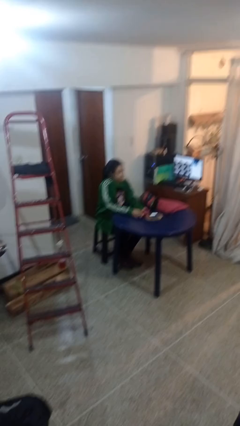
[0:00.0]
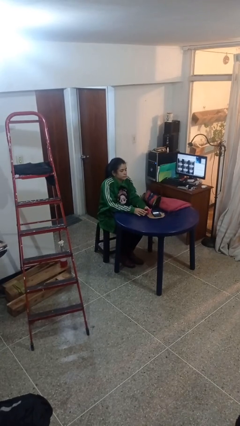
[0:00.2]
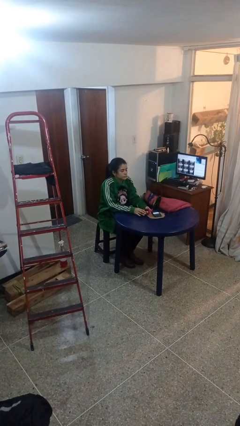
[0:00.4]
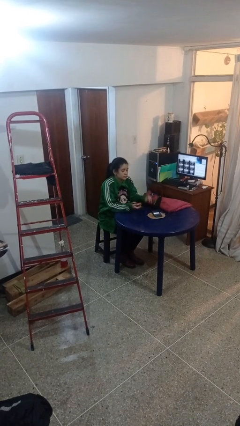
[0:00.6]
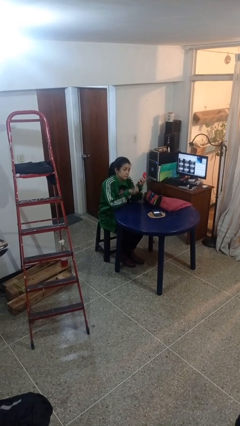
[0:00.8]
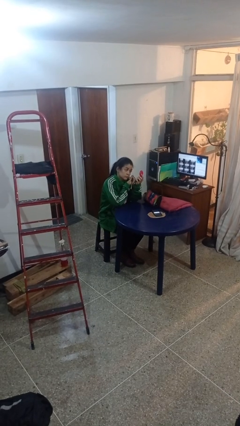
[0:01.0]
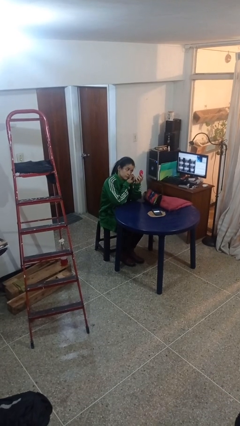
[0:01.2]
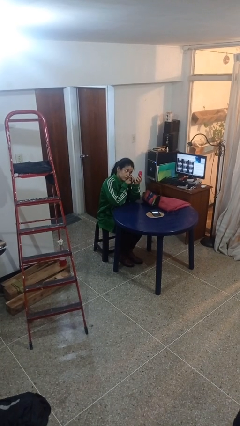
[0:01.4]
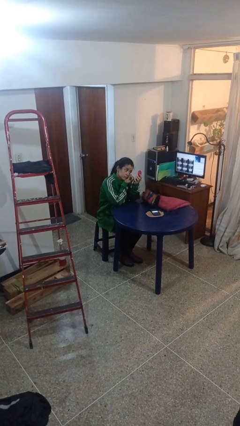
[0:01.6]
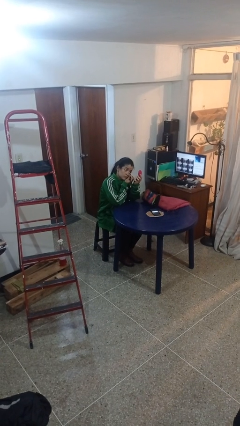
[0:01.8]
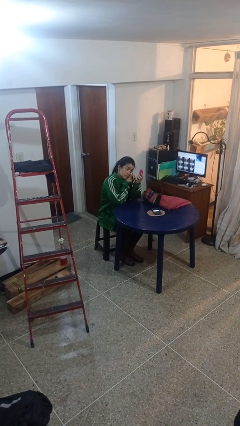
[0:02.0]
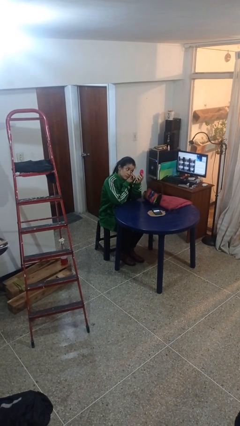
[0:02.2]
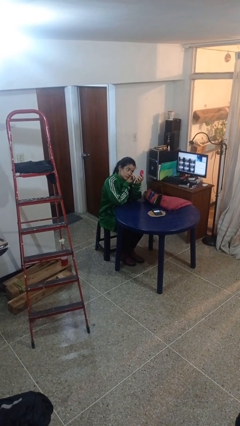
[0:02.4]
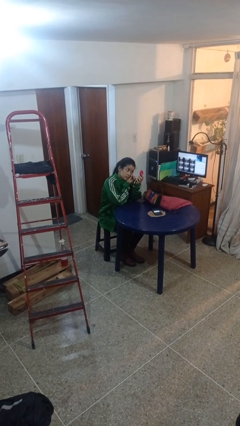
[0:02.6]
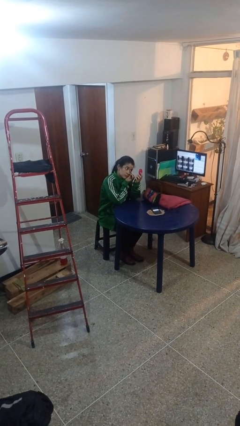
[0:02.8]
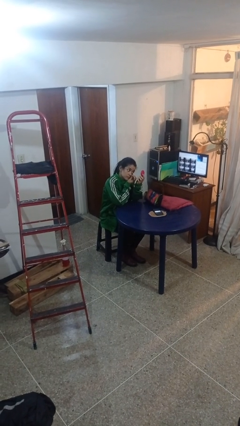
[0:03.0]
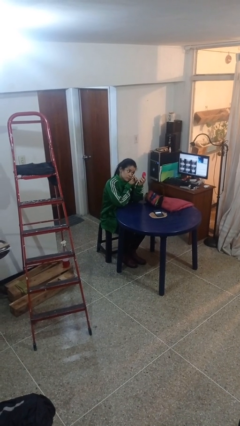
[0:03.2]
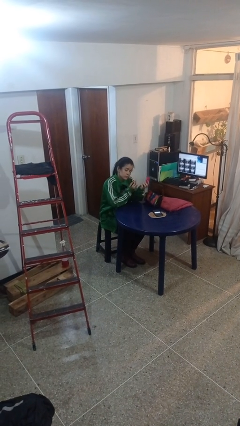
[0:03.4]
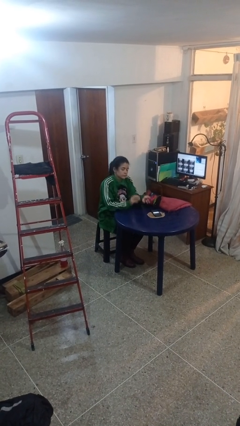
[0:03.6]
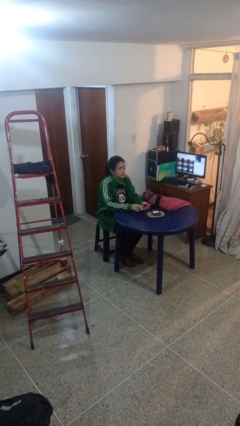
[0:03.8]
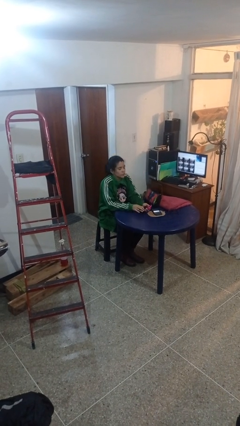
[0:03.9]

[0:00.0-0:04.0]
person applies eye makeup

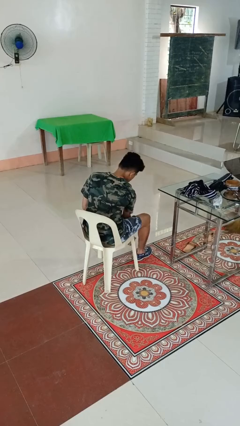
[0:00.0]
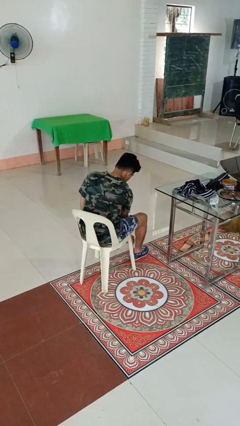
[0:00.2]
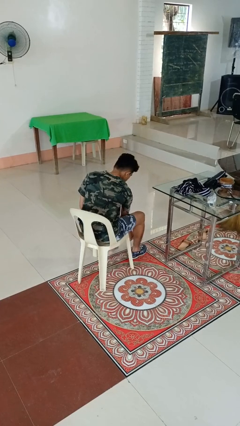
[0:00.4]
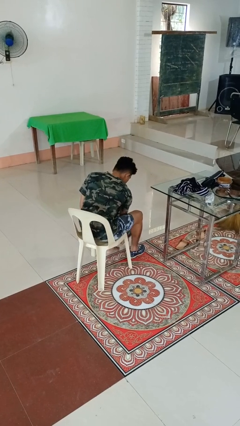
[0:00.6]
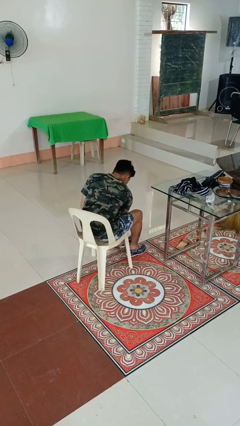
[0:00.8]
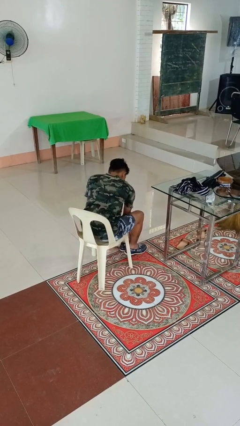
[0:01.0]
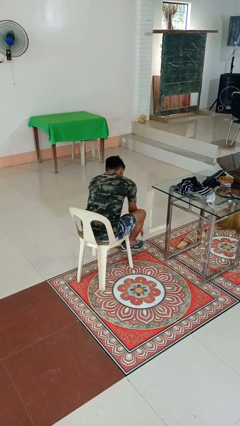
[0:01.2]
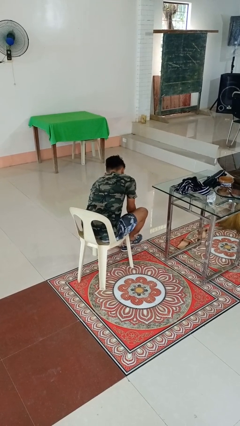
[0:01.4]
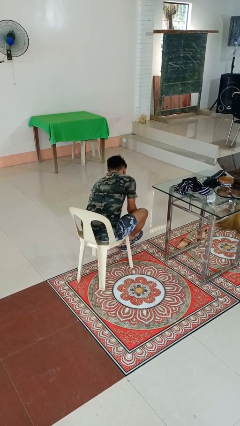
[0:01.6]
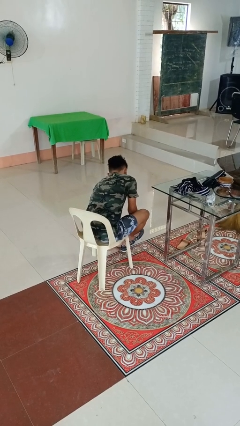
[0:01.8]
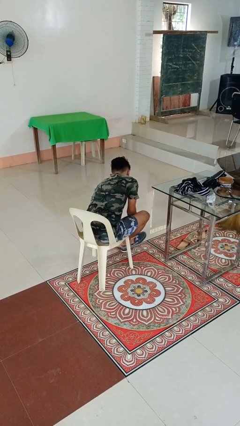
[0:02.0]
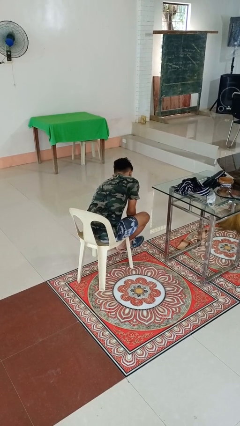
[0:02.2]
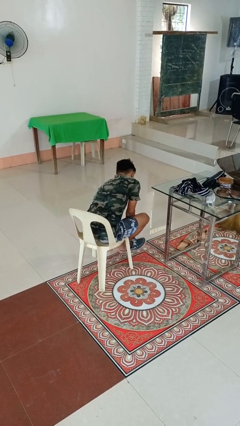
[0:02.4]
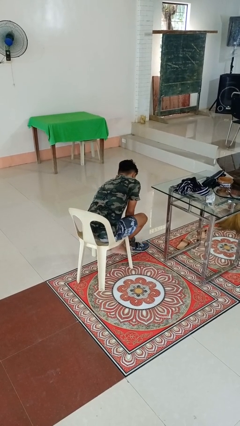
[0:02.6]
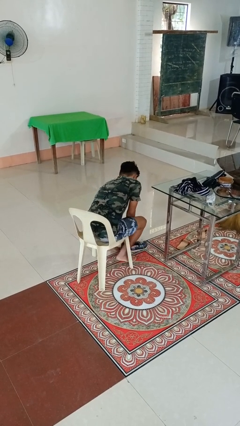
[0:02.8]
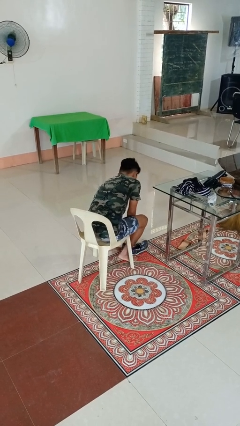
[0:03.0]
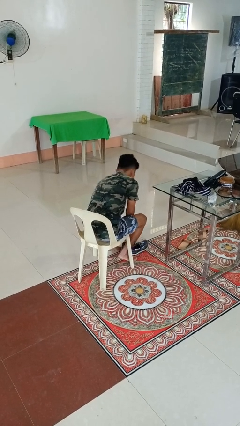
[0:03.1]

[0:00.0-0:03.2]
person takes off shoes

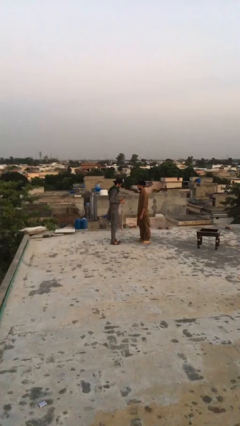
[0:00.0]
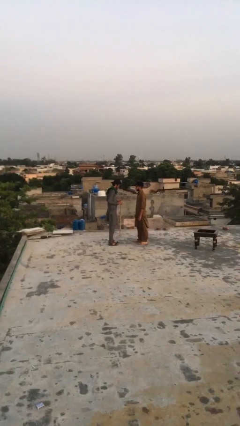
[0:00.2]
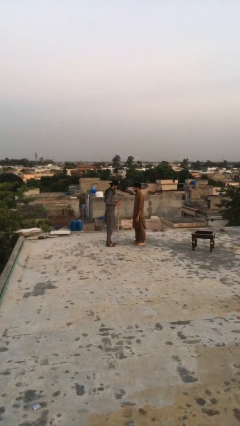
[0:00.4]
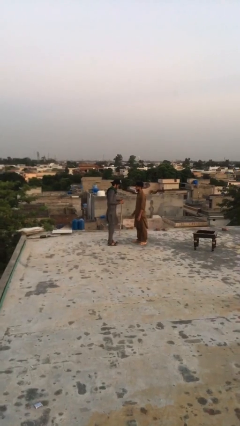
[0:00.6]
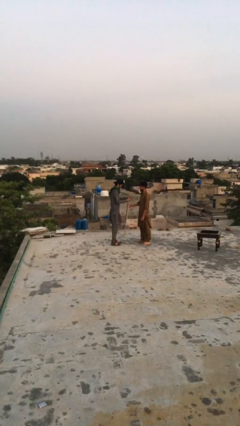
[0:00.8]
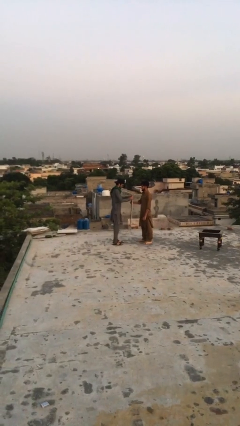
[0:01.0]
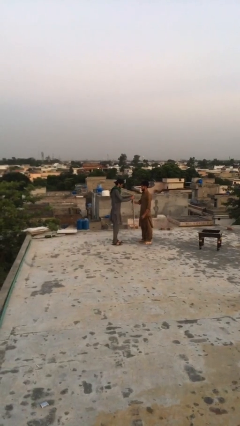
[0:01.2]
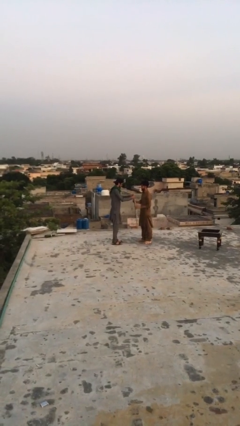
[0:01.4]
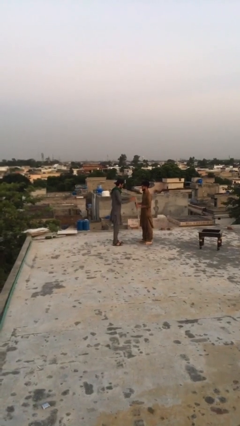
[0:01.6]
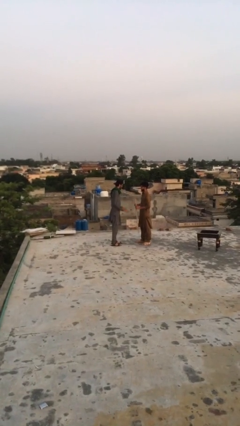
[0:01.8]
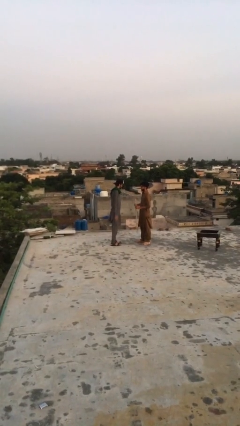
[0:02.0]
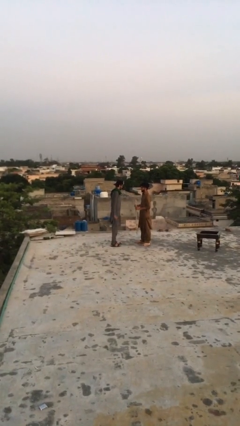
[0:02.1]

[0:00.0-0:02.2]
person transfers object to person

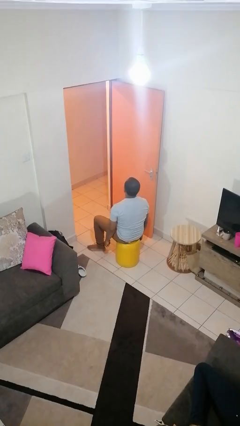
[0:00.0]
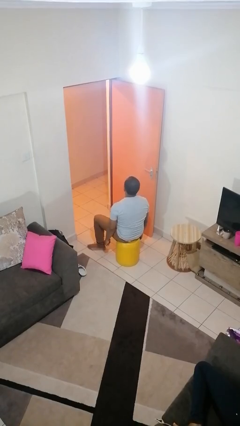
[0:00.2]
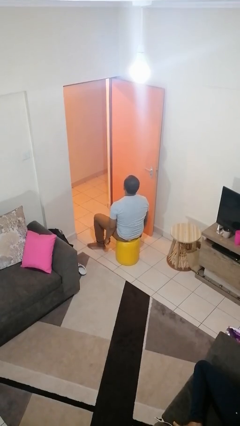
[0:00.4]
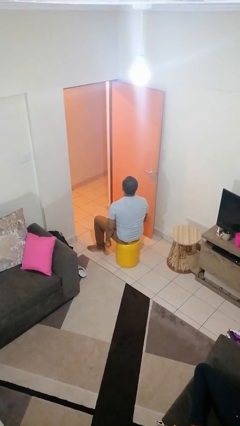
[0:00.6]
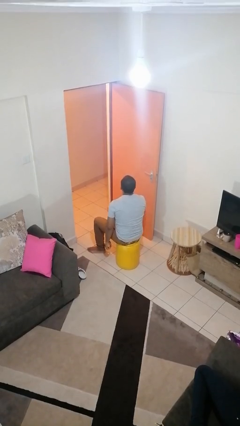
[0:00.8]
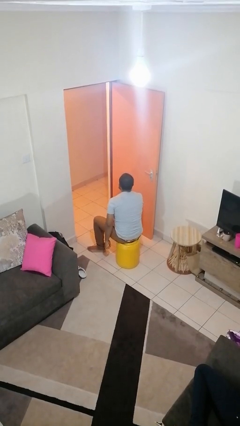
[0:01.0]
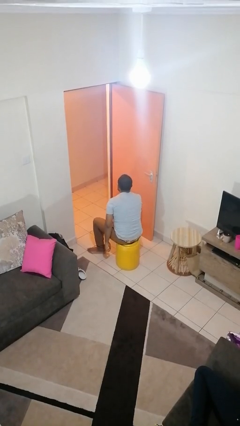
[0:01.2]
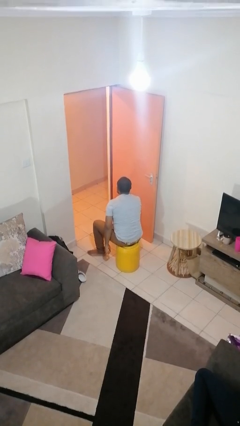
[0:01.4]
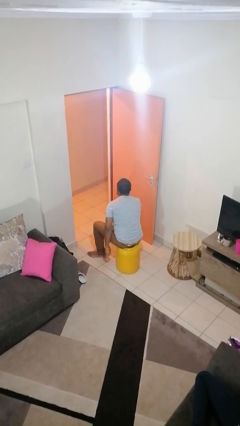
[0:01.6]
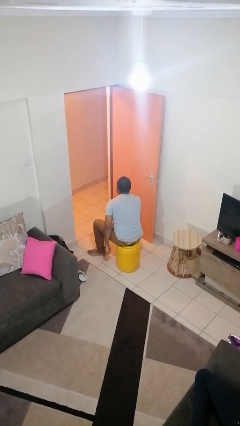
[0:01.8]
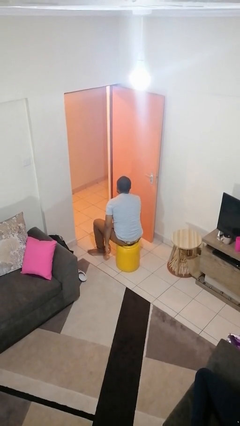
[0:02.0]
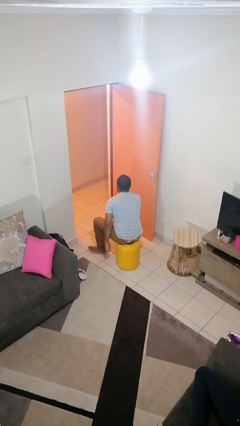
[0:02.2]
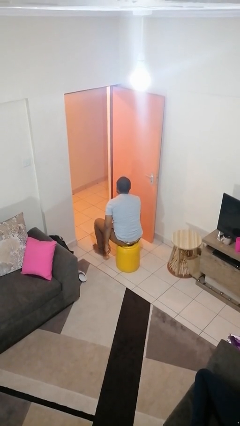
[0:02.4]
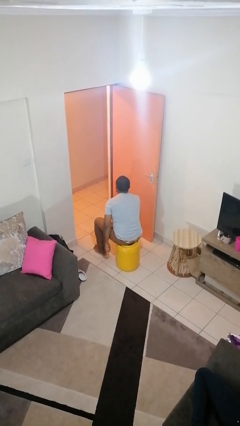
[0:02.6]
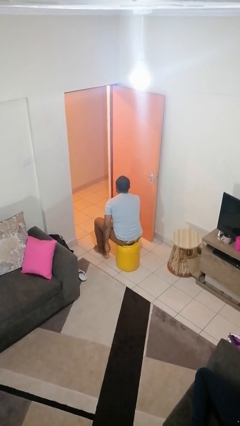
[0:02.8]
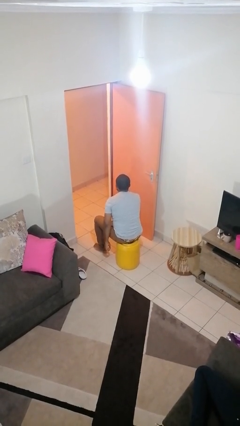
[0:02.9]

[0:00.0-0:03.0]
person gestures be quiet

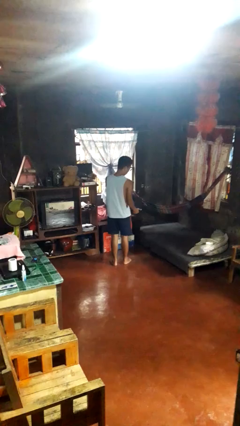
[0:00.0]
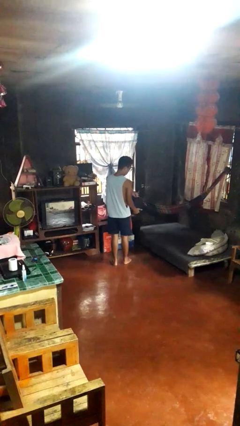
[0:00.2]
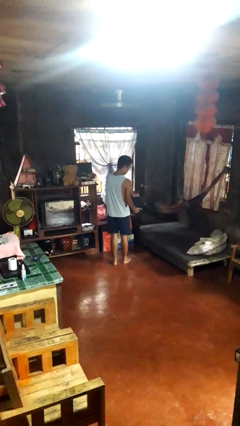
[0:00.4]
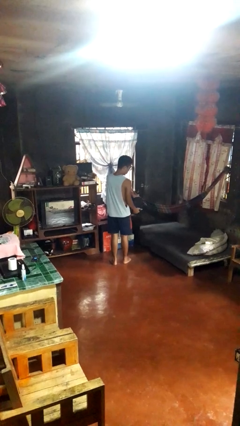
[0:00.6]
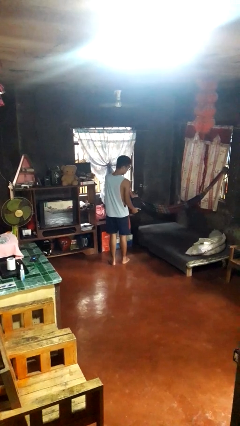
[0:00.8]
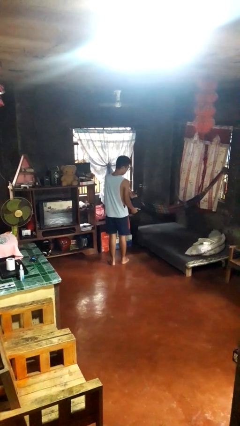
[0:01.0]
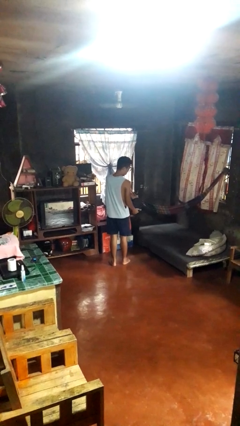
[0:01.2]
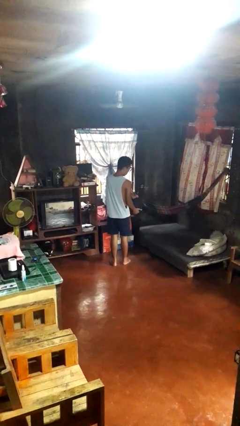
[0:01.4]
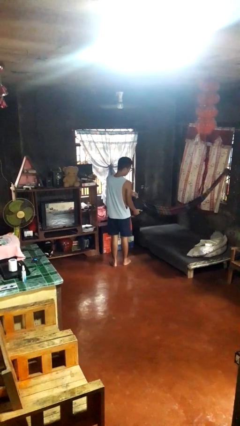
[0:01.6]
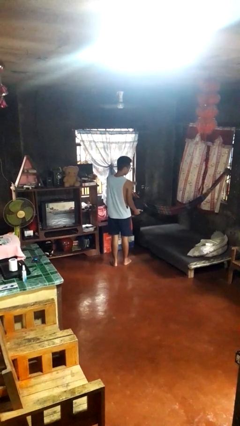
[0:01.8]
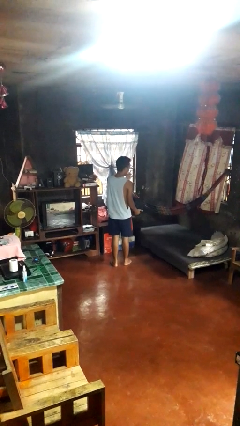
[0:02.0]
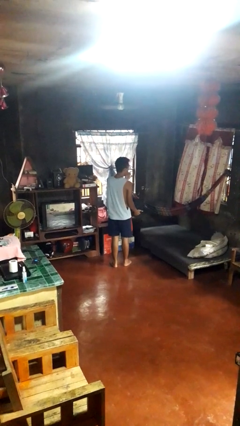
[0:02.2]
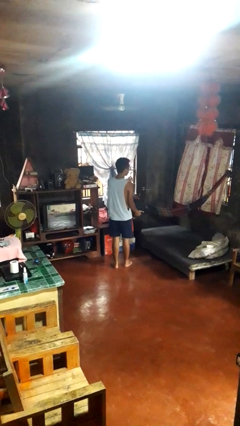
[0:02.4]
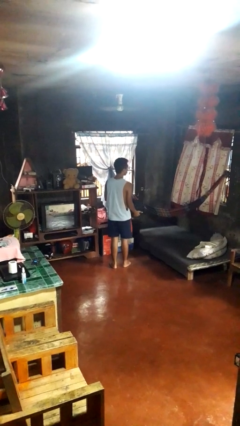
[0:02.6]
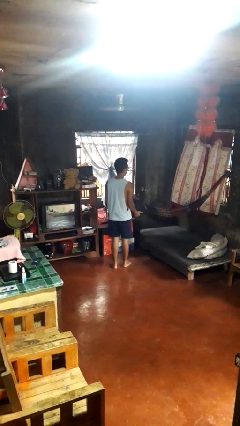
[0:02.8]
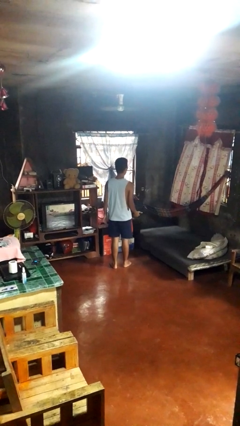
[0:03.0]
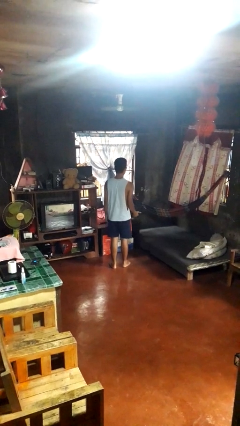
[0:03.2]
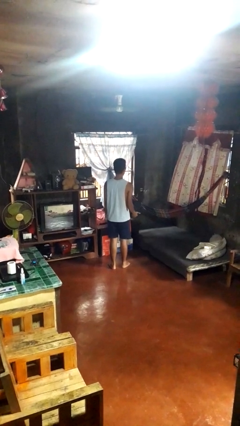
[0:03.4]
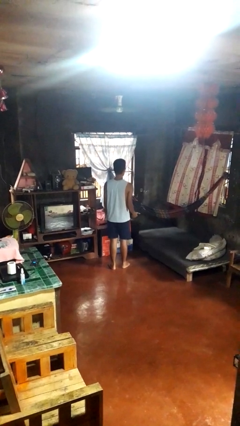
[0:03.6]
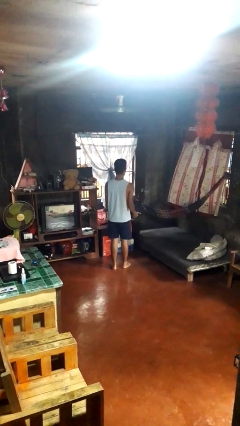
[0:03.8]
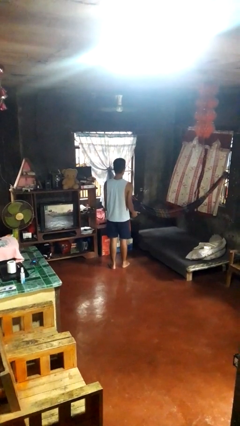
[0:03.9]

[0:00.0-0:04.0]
person eats snack from bag

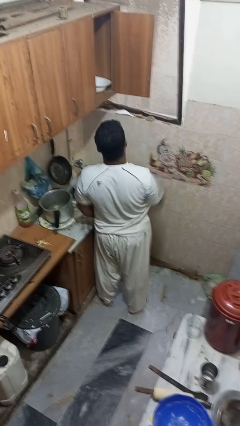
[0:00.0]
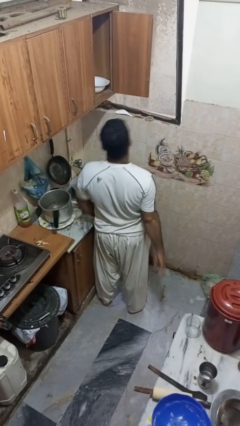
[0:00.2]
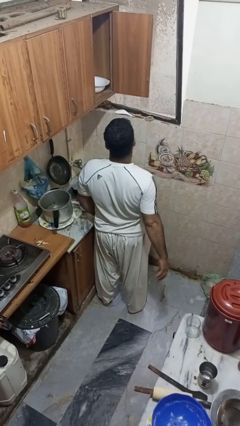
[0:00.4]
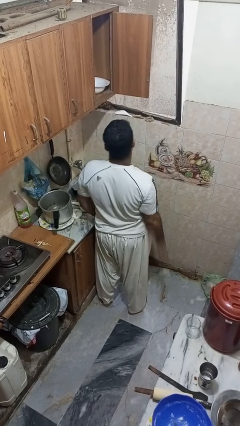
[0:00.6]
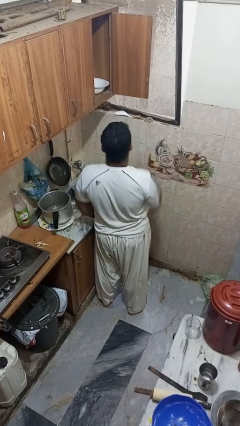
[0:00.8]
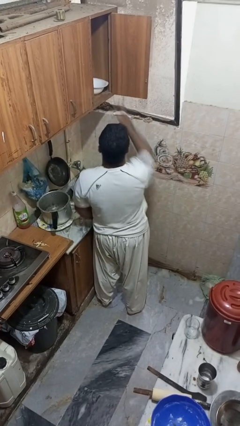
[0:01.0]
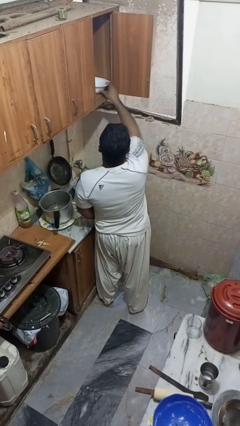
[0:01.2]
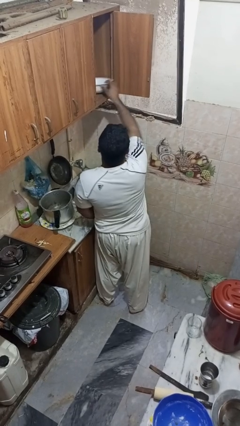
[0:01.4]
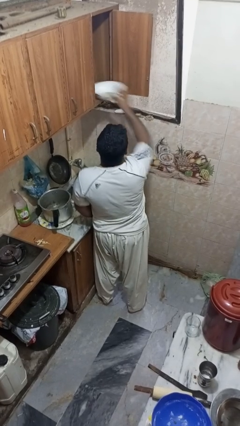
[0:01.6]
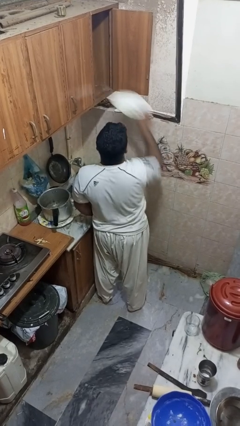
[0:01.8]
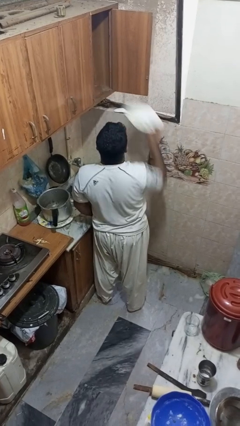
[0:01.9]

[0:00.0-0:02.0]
person takes object from cabinet
